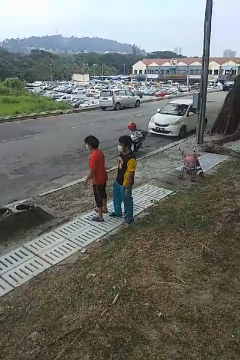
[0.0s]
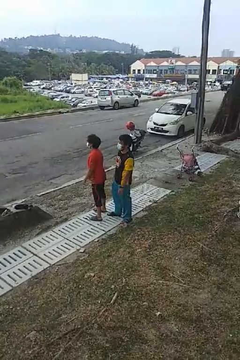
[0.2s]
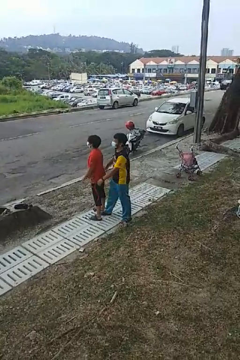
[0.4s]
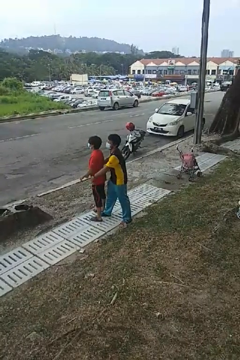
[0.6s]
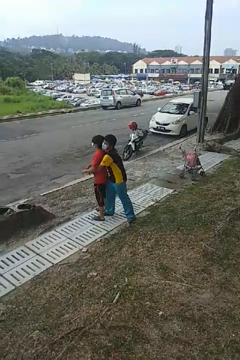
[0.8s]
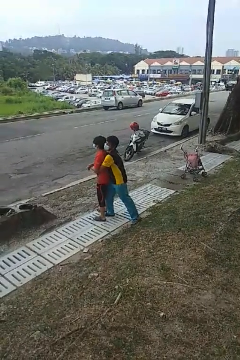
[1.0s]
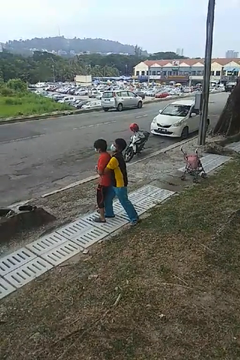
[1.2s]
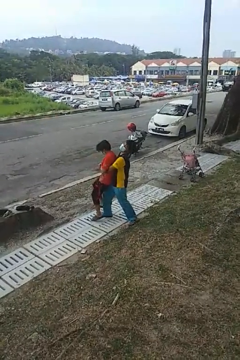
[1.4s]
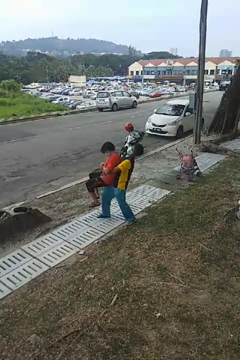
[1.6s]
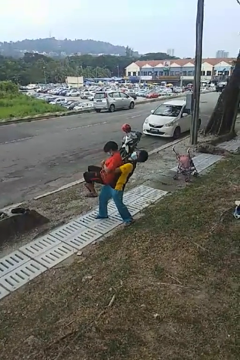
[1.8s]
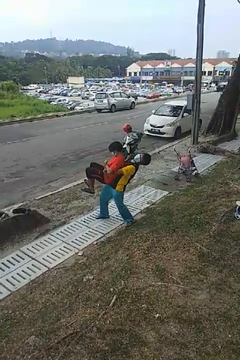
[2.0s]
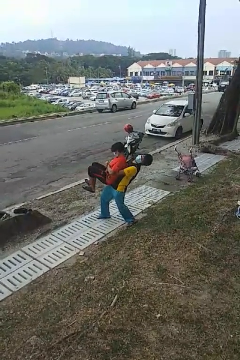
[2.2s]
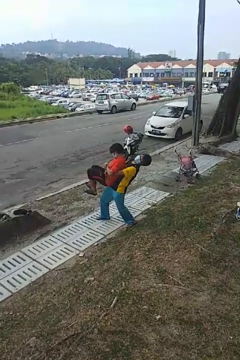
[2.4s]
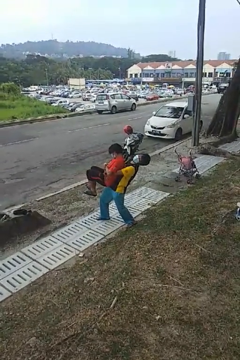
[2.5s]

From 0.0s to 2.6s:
person picks up person

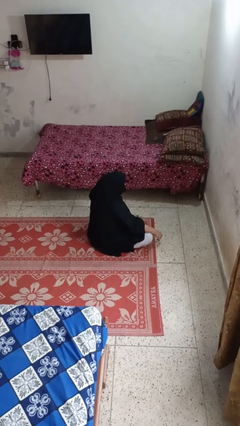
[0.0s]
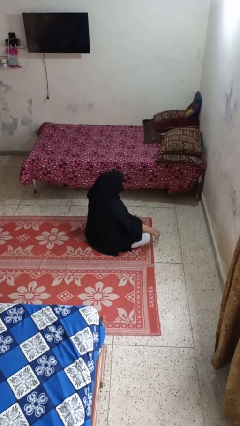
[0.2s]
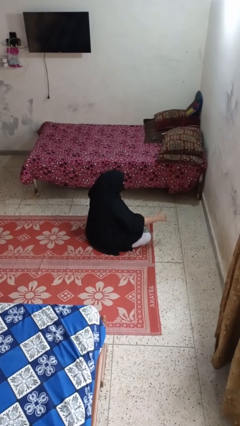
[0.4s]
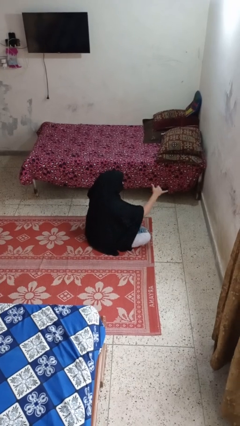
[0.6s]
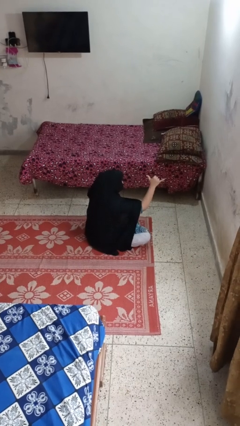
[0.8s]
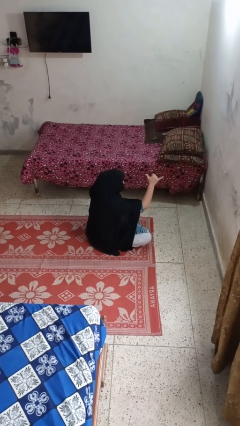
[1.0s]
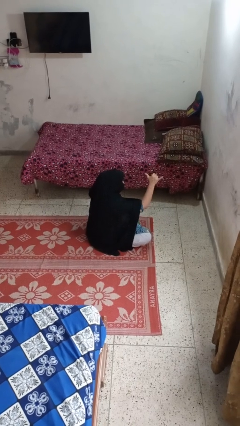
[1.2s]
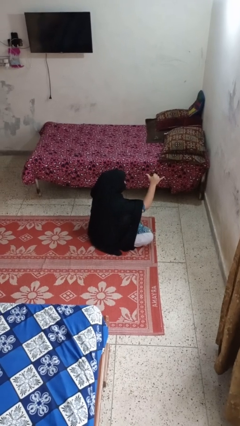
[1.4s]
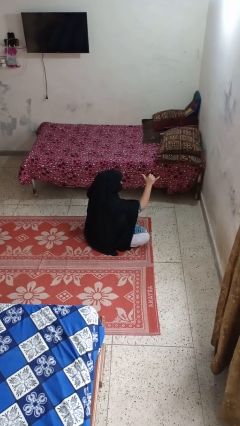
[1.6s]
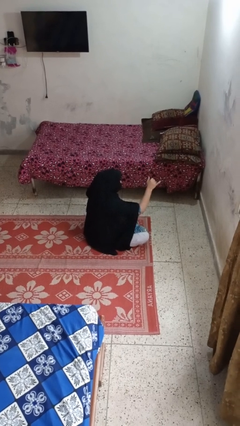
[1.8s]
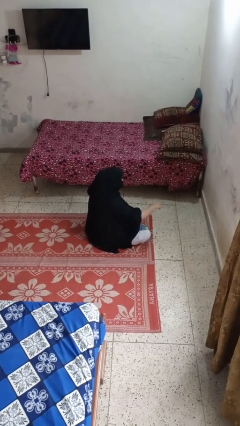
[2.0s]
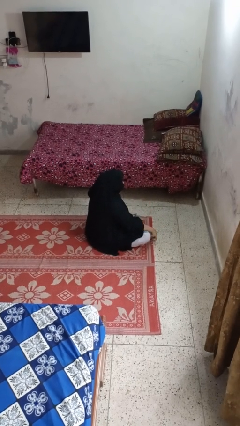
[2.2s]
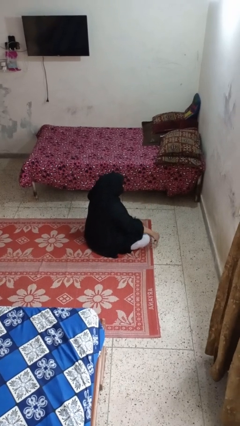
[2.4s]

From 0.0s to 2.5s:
person gestures hang loose

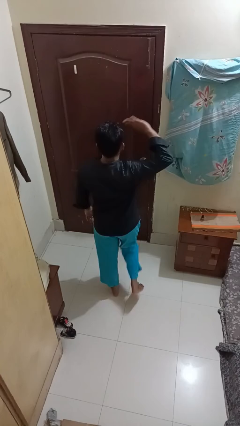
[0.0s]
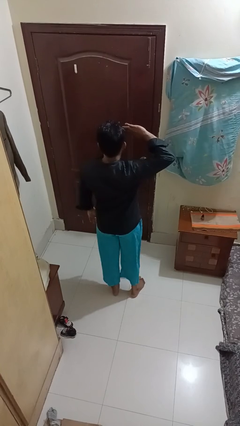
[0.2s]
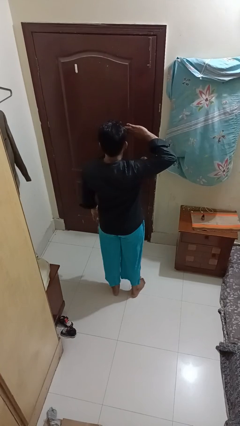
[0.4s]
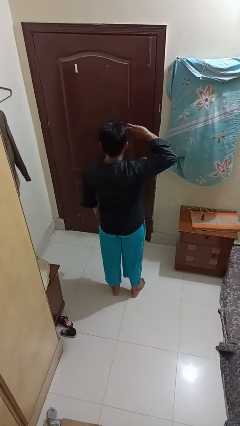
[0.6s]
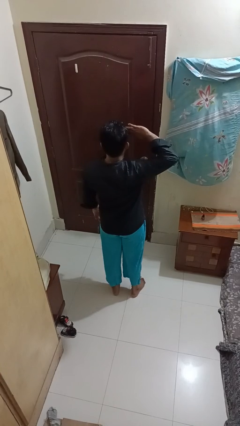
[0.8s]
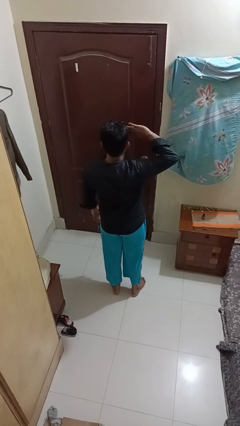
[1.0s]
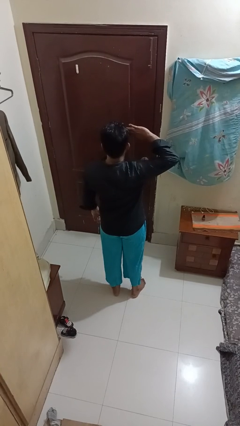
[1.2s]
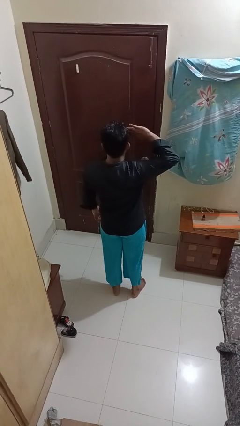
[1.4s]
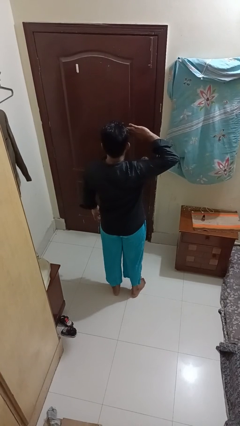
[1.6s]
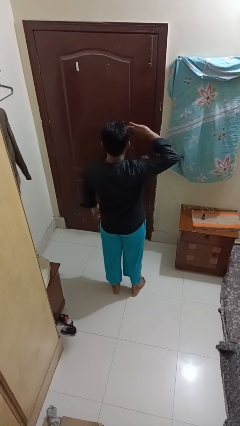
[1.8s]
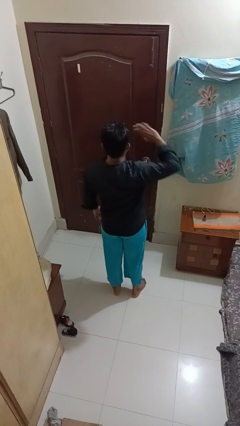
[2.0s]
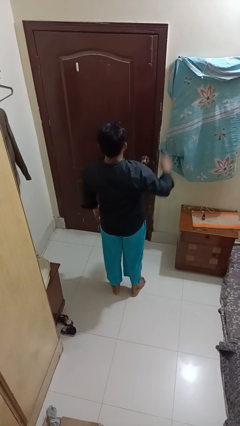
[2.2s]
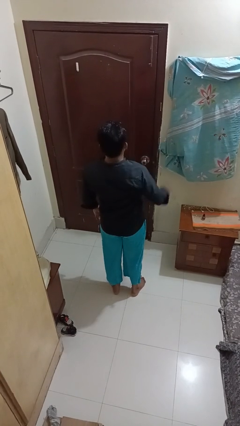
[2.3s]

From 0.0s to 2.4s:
person salutes

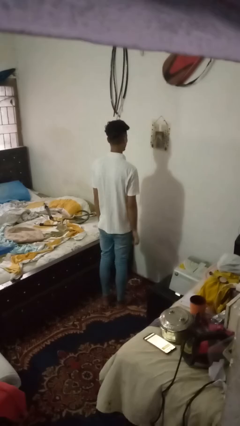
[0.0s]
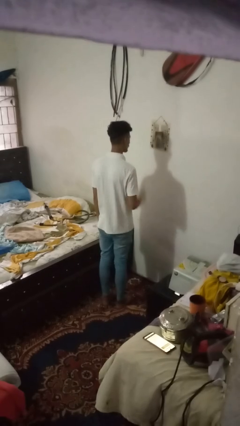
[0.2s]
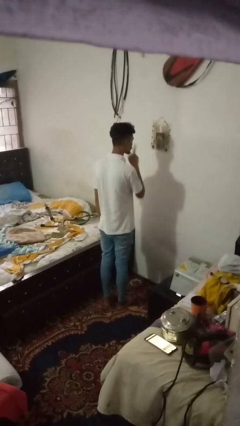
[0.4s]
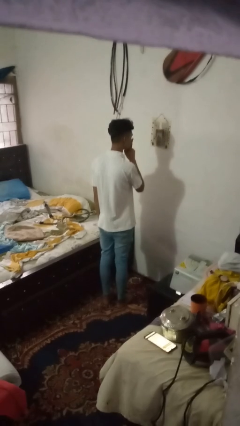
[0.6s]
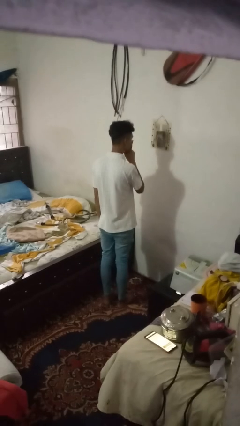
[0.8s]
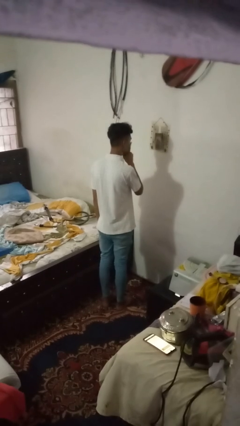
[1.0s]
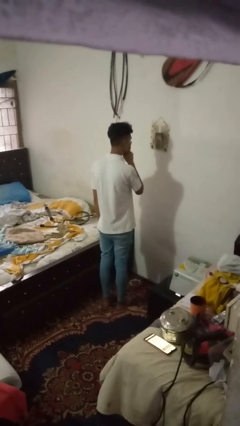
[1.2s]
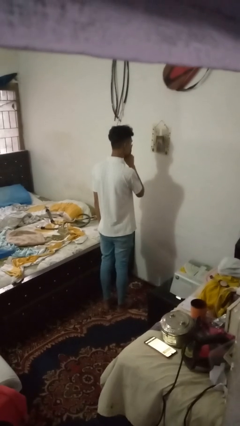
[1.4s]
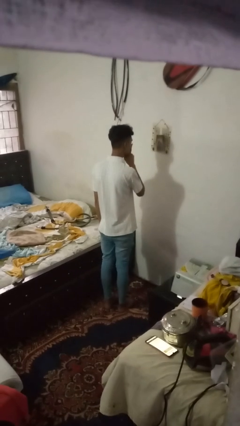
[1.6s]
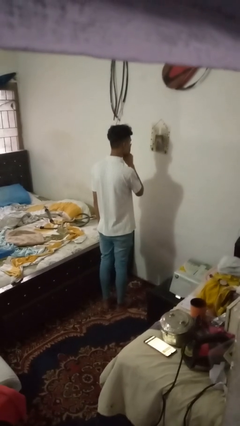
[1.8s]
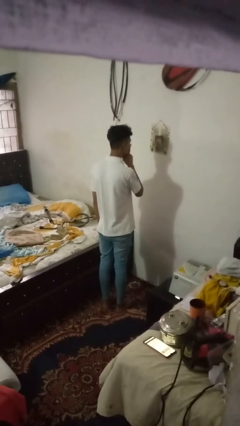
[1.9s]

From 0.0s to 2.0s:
person gestures be quiet

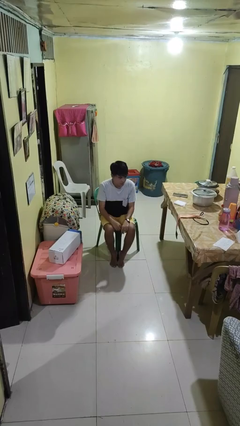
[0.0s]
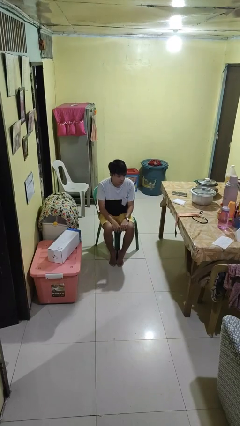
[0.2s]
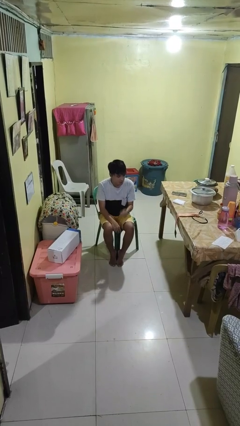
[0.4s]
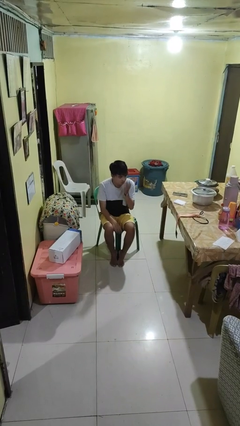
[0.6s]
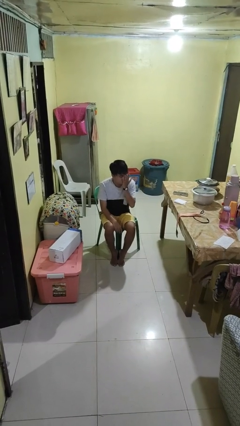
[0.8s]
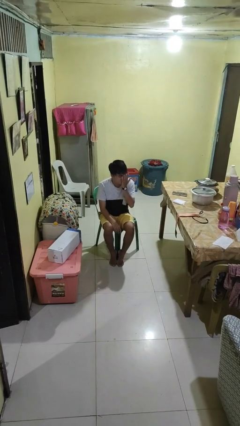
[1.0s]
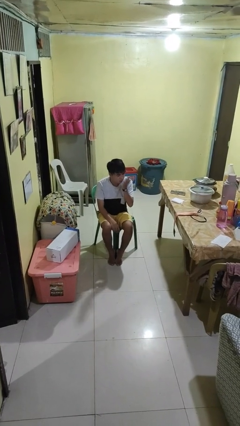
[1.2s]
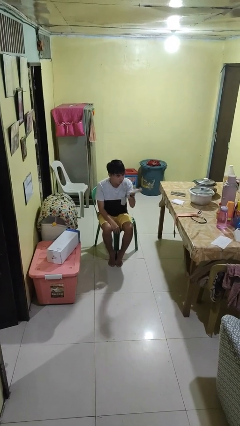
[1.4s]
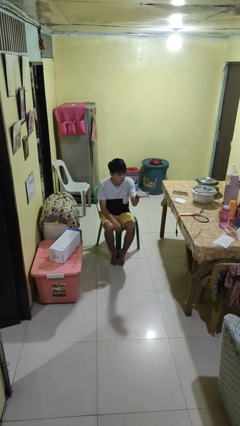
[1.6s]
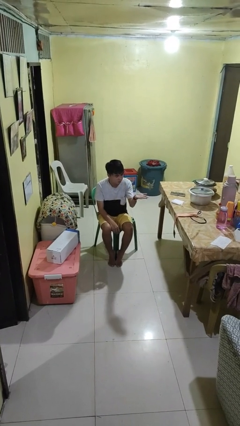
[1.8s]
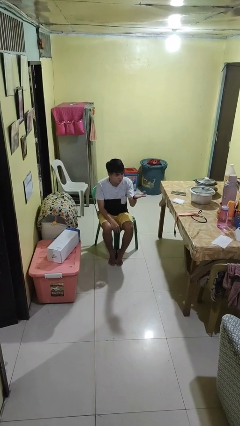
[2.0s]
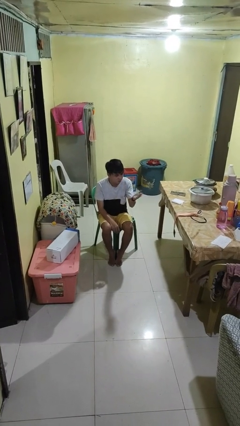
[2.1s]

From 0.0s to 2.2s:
person gestures blow kiss

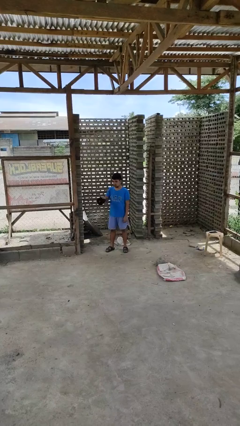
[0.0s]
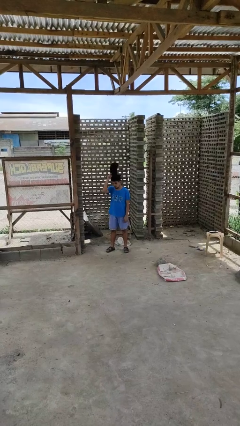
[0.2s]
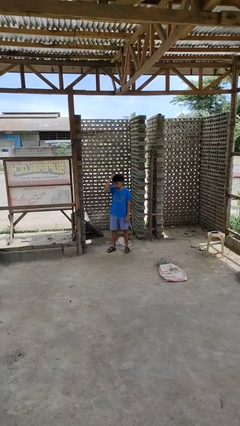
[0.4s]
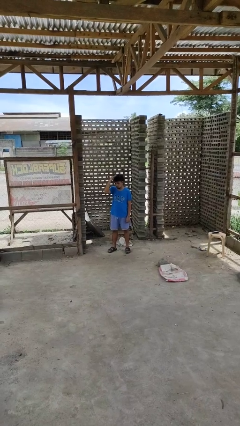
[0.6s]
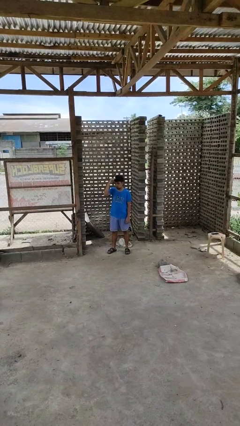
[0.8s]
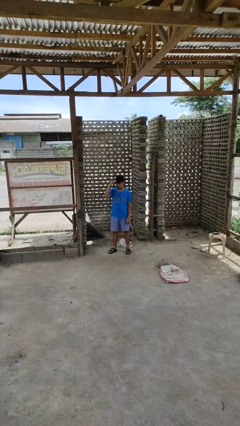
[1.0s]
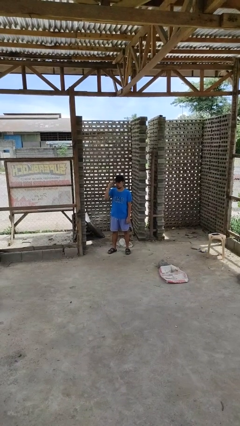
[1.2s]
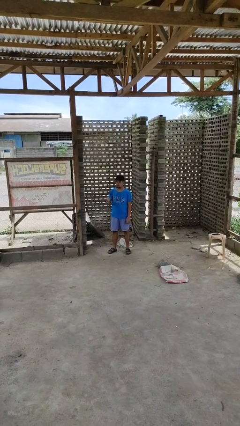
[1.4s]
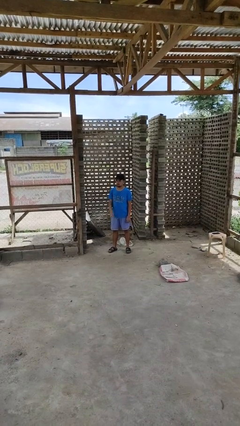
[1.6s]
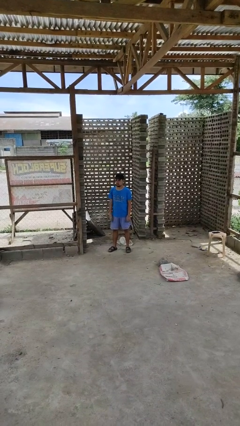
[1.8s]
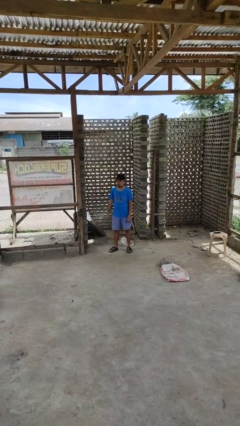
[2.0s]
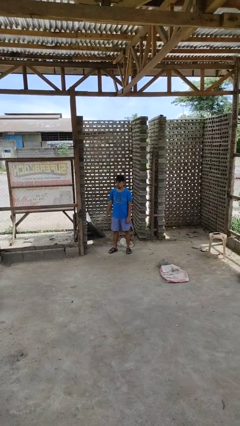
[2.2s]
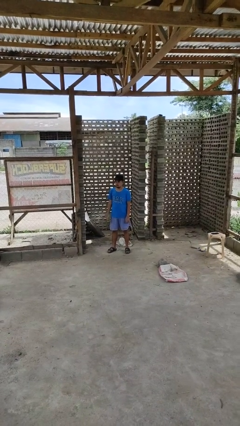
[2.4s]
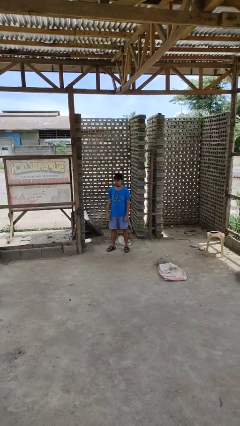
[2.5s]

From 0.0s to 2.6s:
person puts on hat

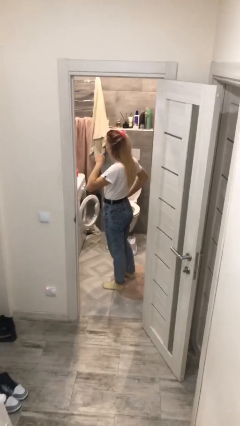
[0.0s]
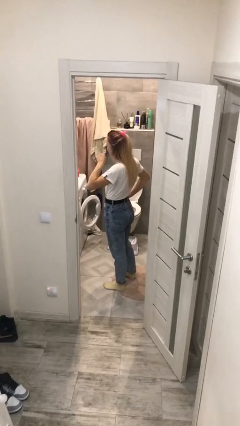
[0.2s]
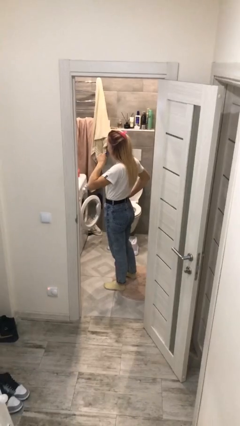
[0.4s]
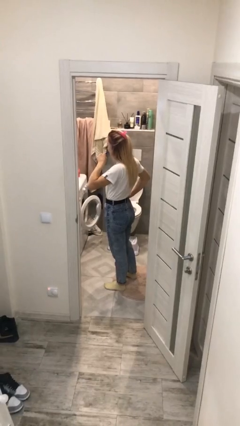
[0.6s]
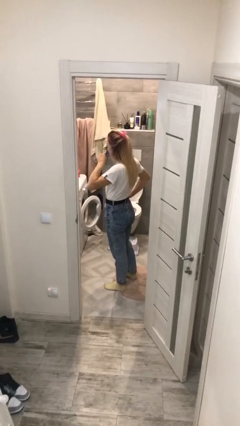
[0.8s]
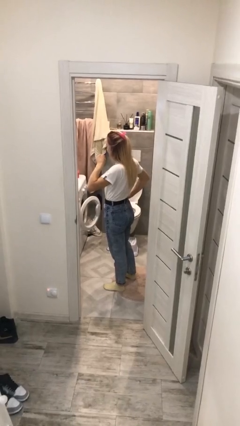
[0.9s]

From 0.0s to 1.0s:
person brushes teeth

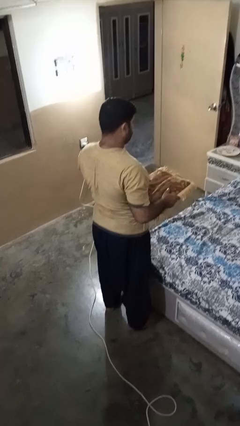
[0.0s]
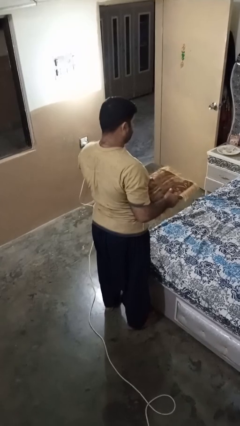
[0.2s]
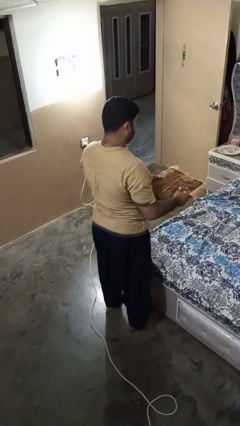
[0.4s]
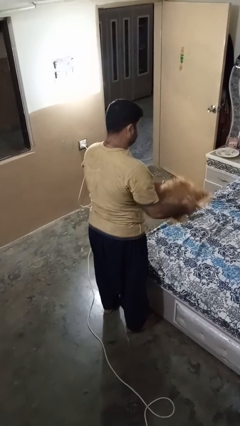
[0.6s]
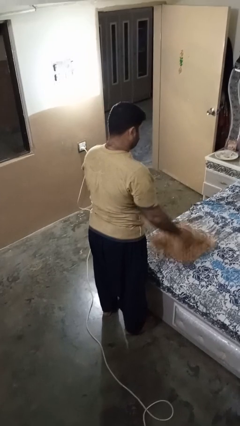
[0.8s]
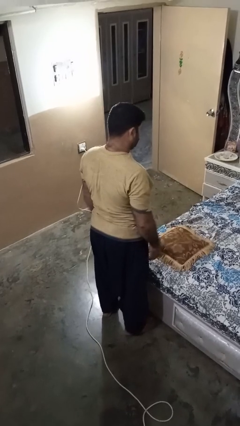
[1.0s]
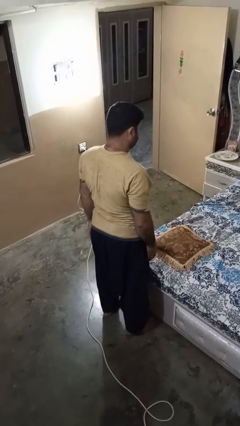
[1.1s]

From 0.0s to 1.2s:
person puts down object on bed

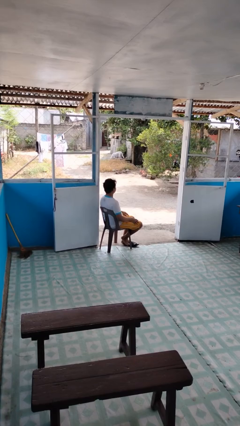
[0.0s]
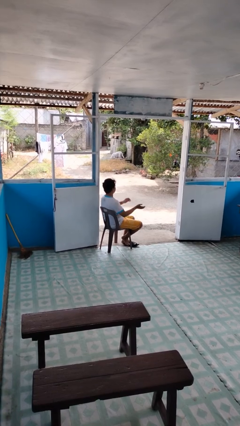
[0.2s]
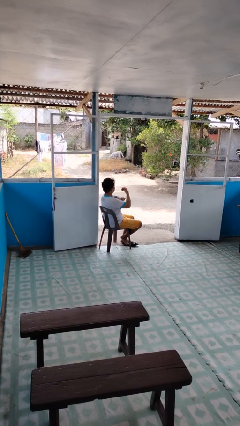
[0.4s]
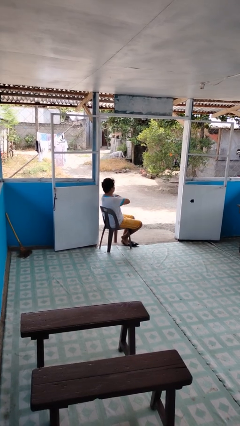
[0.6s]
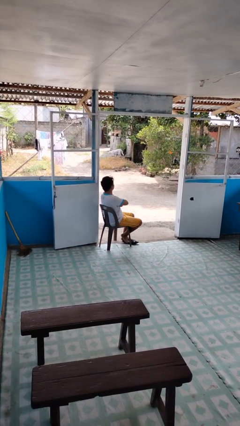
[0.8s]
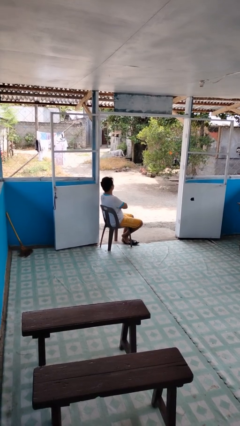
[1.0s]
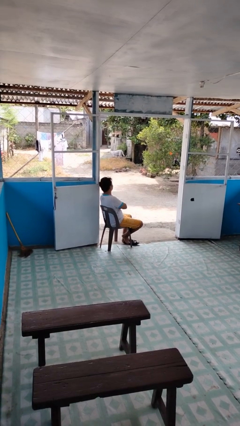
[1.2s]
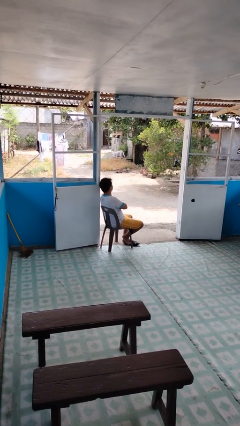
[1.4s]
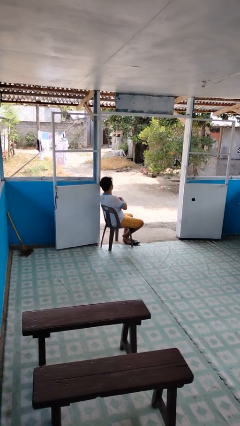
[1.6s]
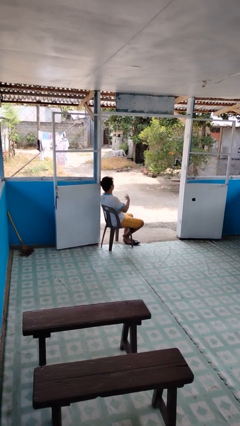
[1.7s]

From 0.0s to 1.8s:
person crosses arms
